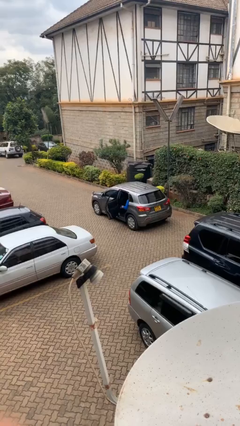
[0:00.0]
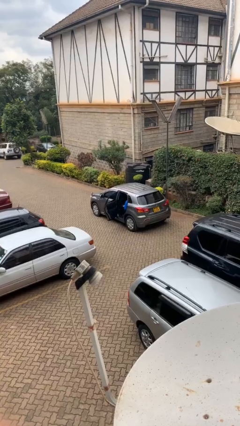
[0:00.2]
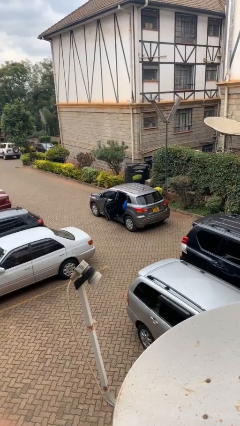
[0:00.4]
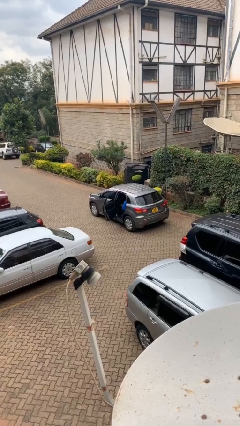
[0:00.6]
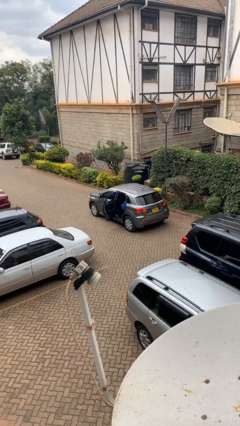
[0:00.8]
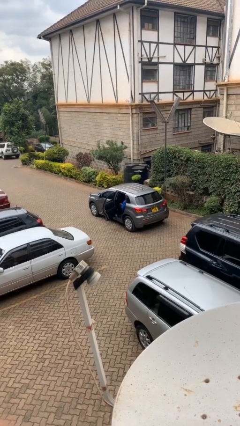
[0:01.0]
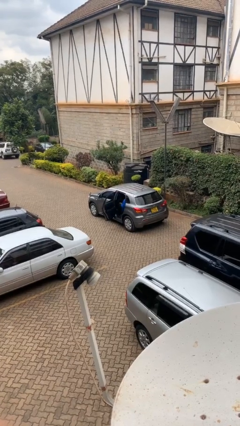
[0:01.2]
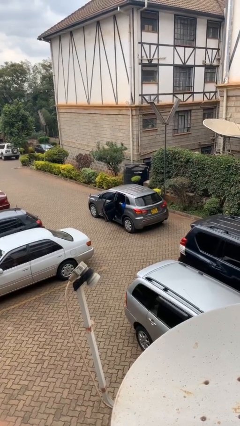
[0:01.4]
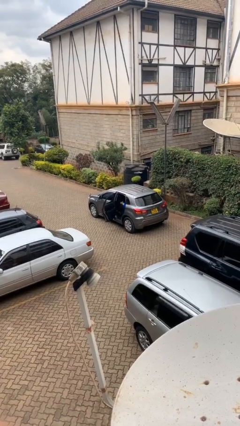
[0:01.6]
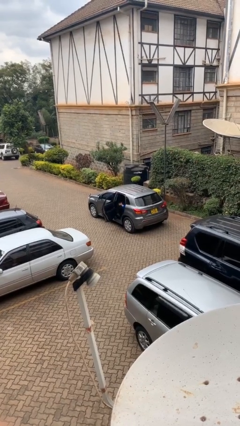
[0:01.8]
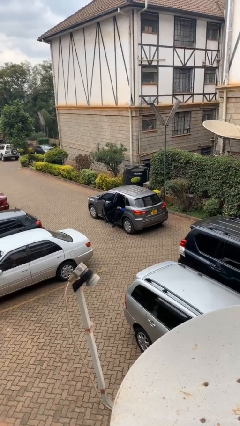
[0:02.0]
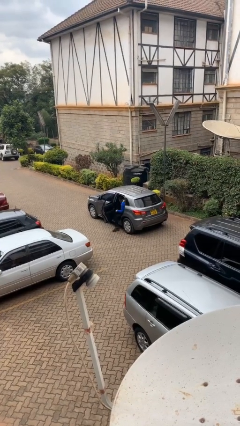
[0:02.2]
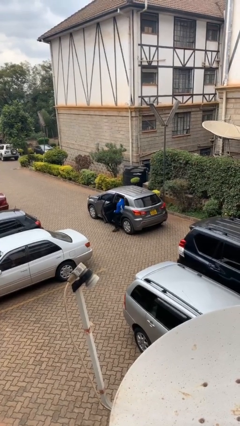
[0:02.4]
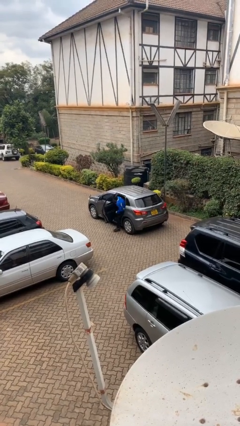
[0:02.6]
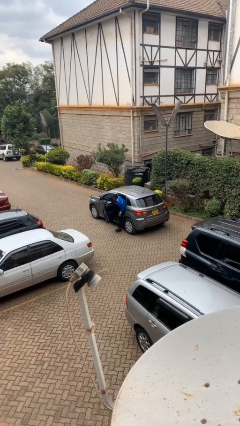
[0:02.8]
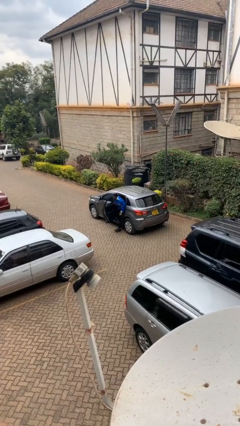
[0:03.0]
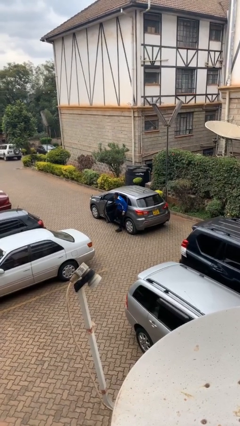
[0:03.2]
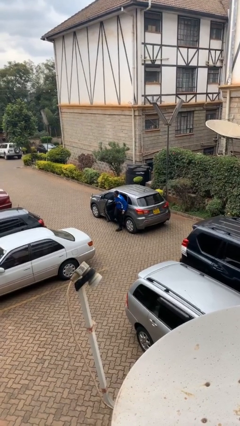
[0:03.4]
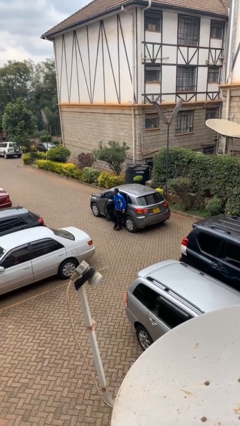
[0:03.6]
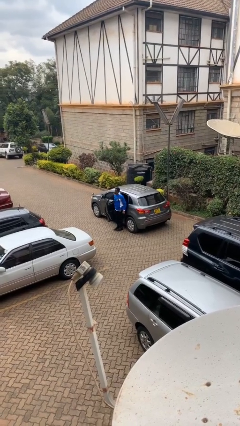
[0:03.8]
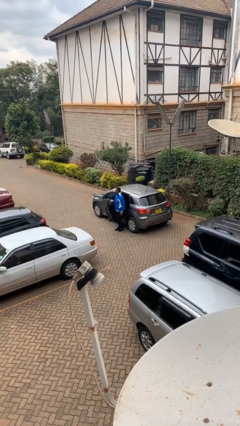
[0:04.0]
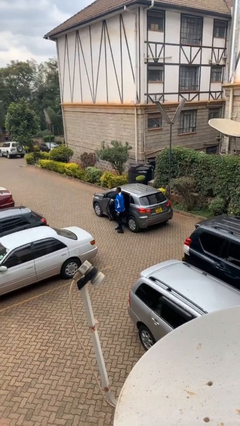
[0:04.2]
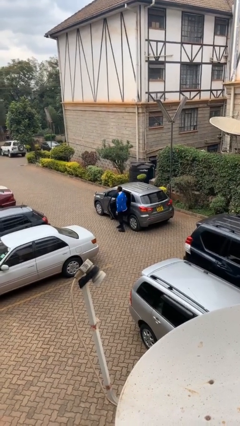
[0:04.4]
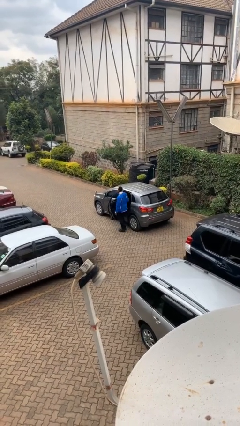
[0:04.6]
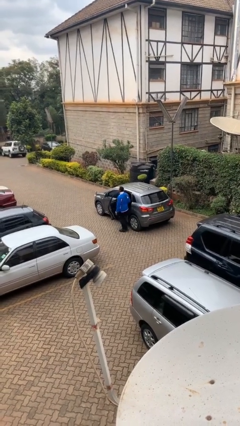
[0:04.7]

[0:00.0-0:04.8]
person exits car

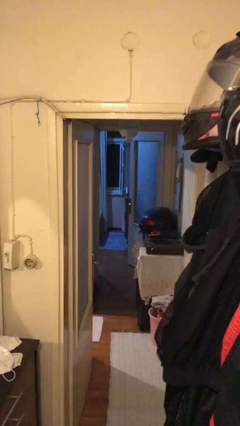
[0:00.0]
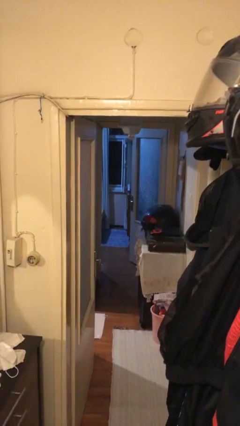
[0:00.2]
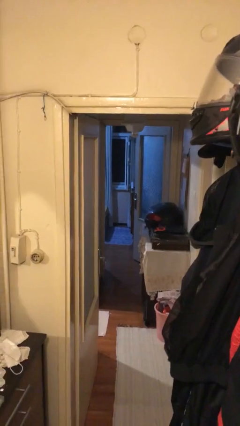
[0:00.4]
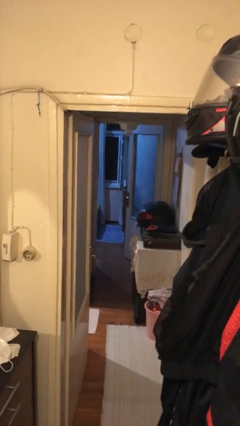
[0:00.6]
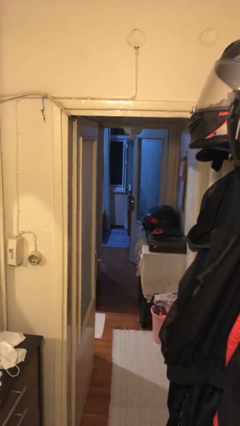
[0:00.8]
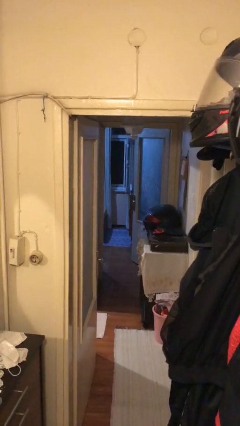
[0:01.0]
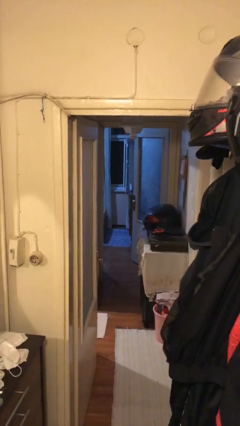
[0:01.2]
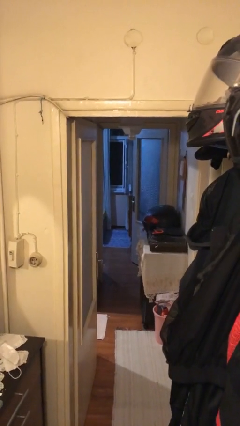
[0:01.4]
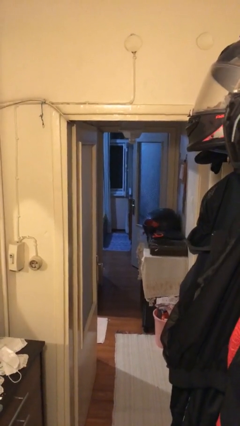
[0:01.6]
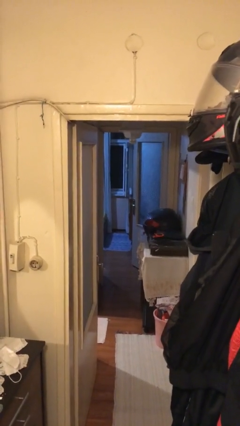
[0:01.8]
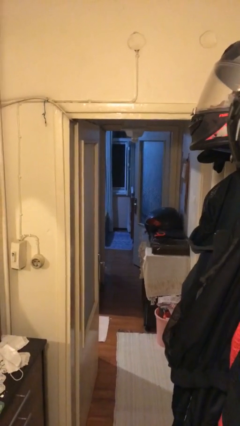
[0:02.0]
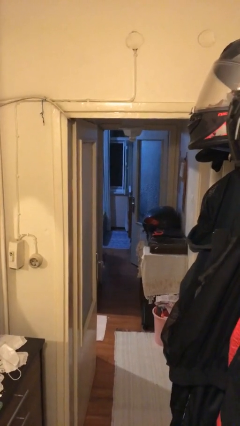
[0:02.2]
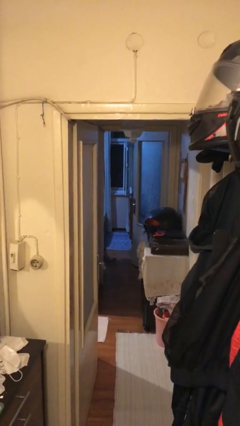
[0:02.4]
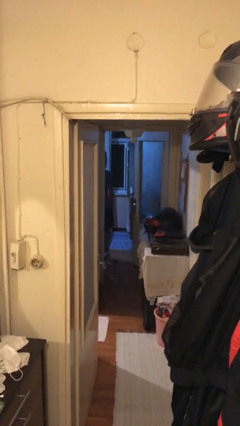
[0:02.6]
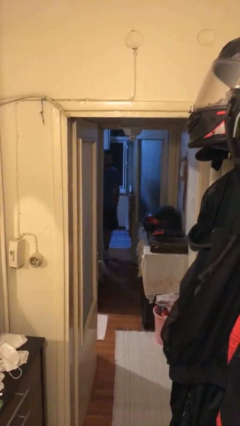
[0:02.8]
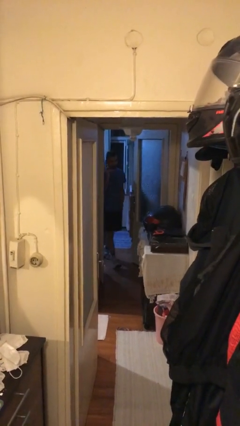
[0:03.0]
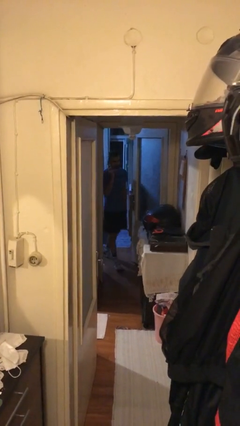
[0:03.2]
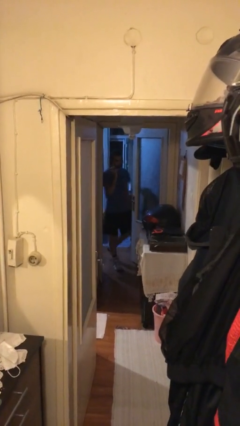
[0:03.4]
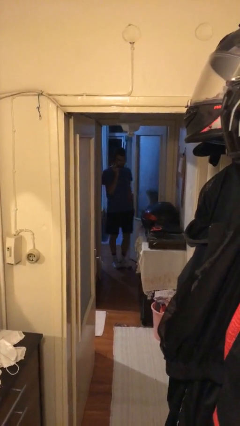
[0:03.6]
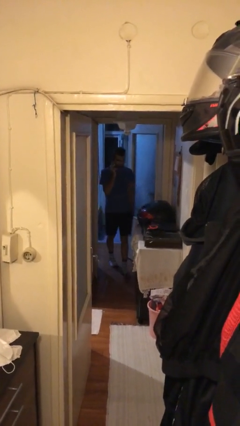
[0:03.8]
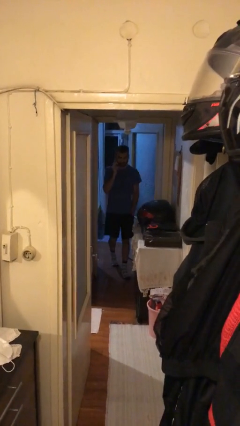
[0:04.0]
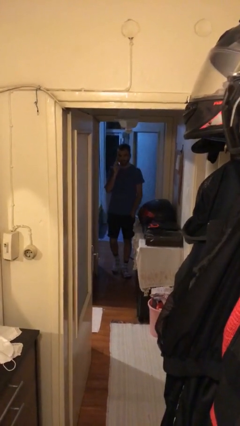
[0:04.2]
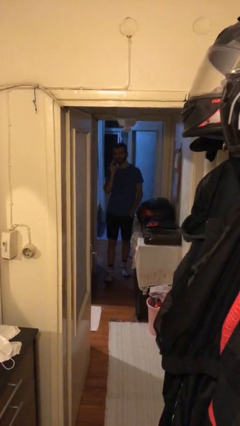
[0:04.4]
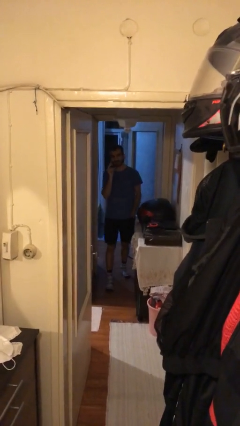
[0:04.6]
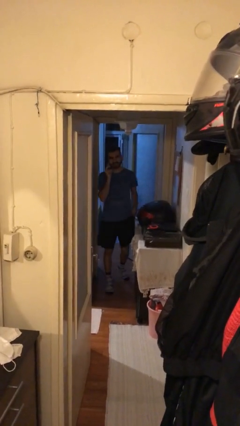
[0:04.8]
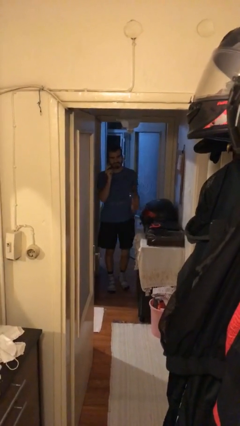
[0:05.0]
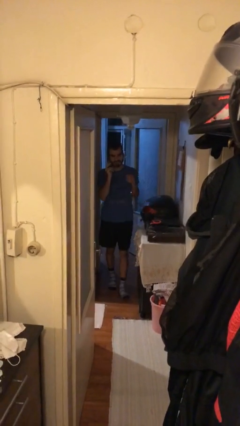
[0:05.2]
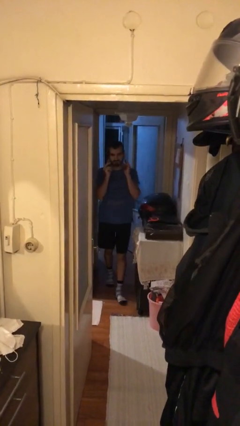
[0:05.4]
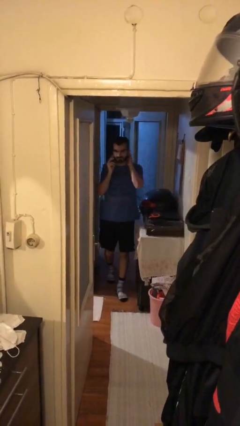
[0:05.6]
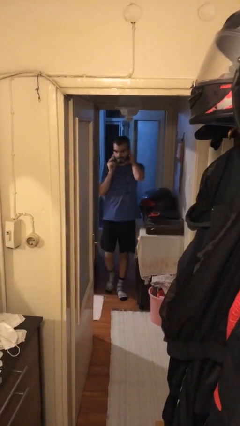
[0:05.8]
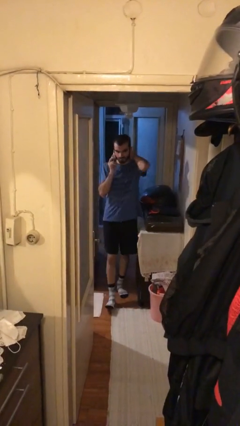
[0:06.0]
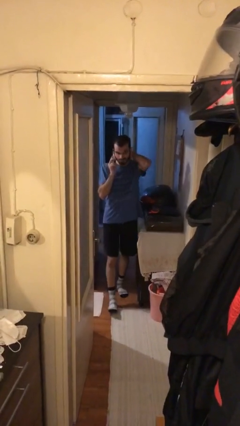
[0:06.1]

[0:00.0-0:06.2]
person enters scene through structure

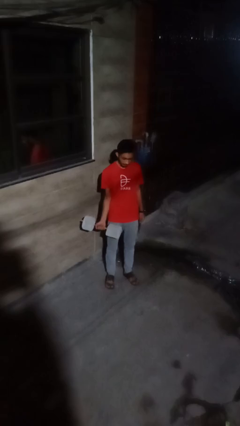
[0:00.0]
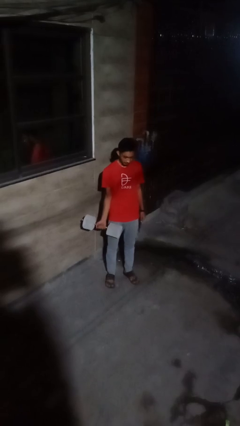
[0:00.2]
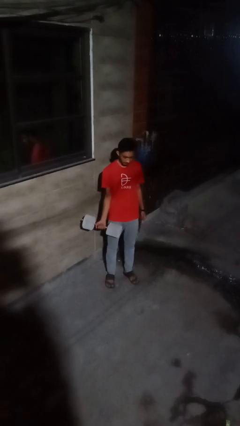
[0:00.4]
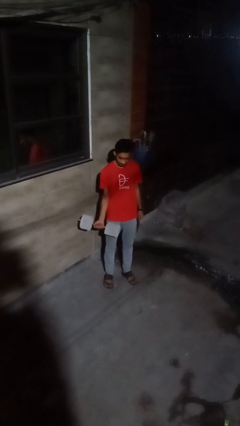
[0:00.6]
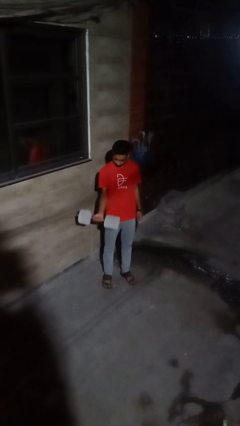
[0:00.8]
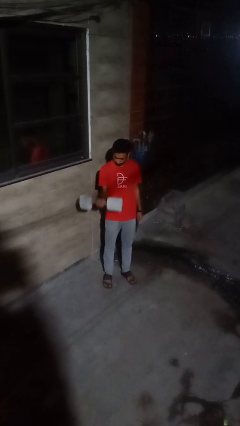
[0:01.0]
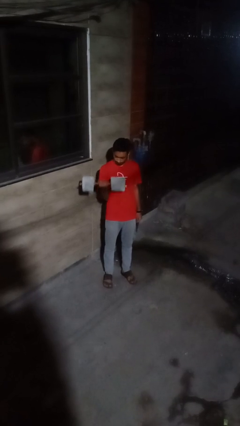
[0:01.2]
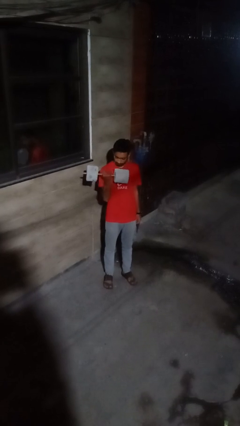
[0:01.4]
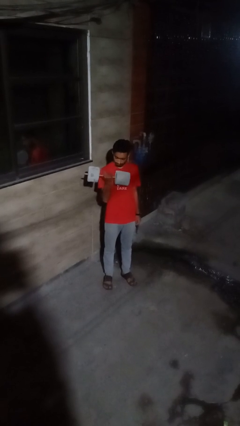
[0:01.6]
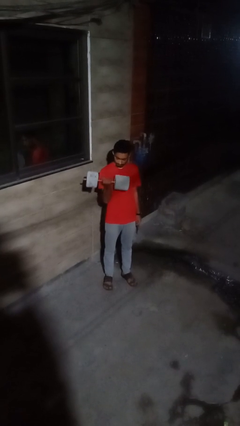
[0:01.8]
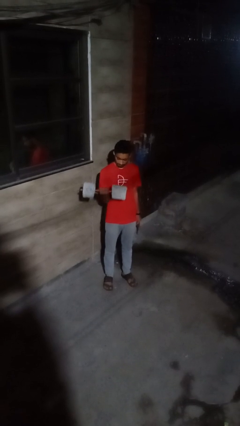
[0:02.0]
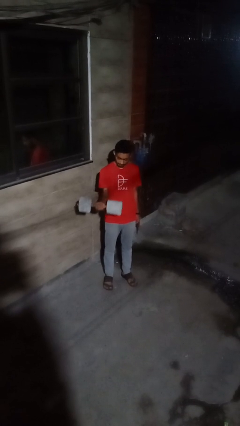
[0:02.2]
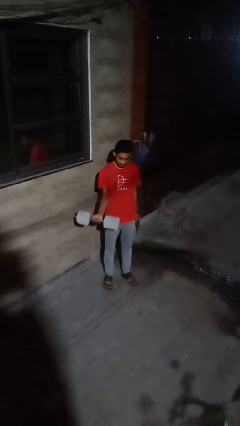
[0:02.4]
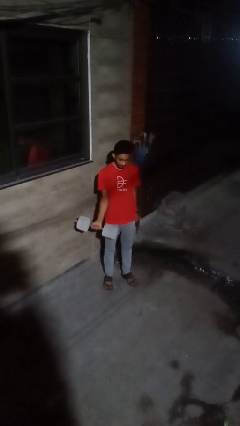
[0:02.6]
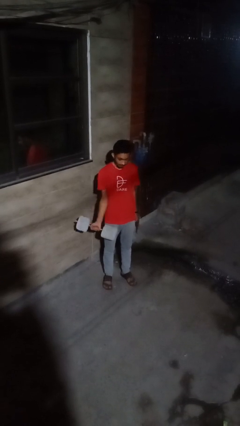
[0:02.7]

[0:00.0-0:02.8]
person lifts dumbbells

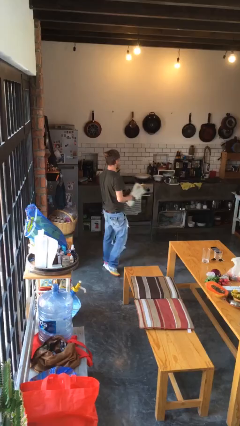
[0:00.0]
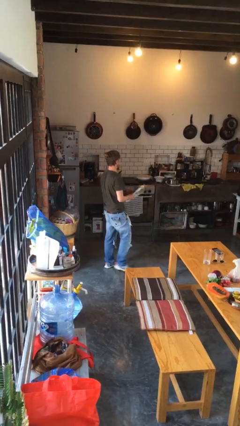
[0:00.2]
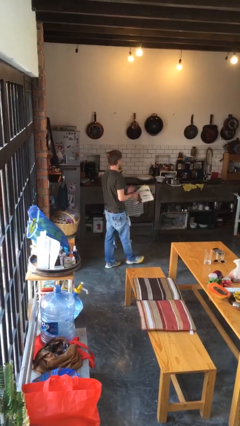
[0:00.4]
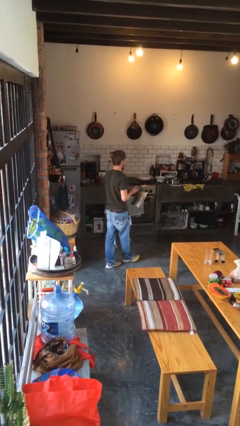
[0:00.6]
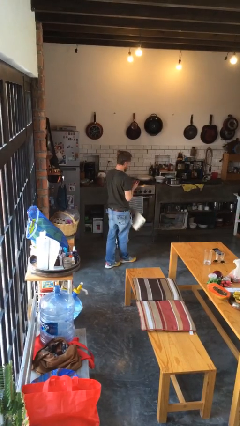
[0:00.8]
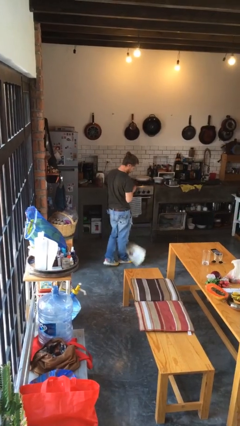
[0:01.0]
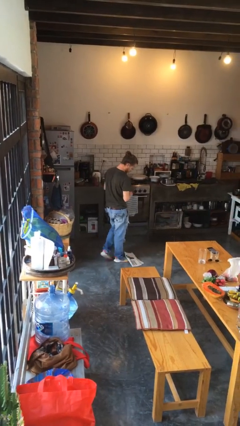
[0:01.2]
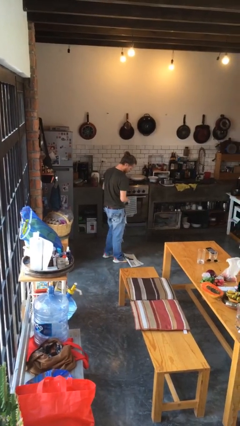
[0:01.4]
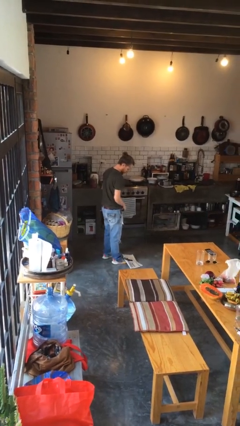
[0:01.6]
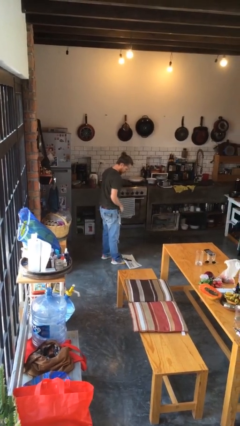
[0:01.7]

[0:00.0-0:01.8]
person drops object

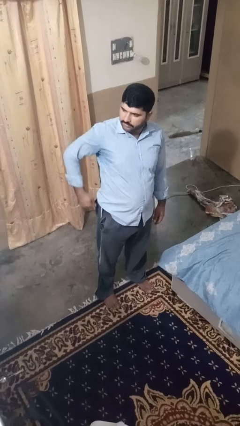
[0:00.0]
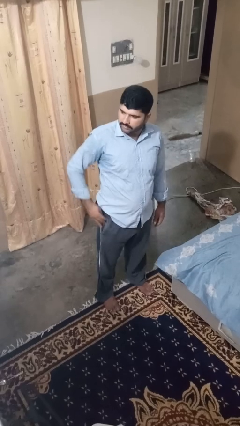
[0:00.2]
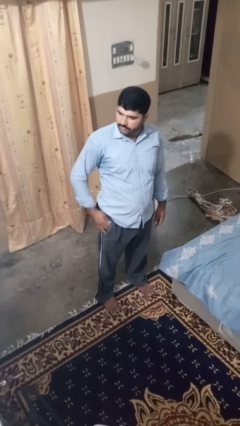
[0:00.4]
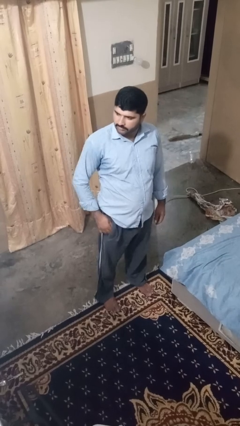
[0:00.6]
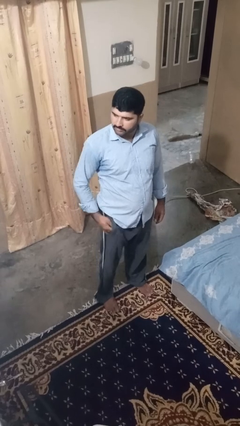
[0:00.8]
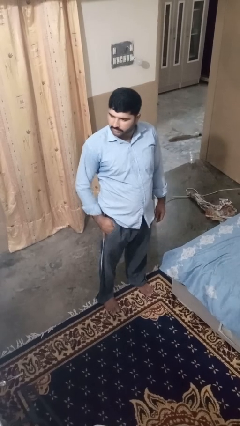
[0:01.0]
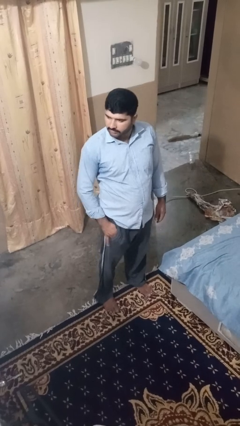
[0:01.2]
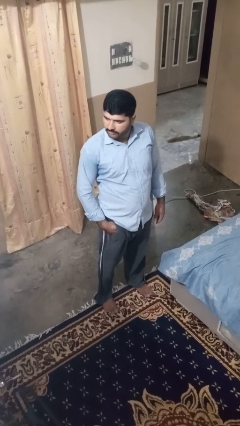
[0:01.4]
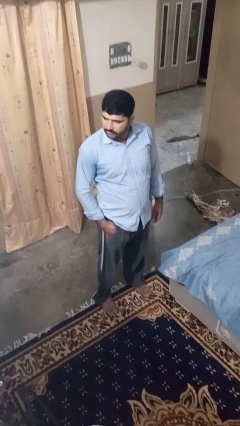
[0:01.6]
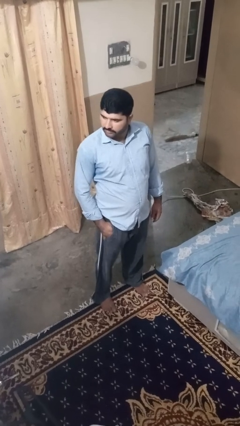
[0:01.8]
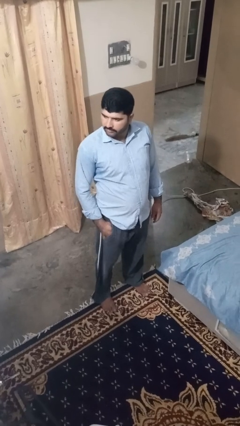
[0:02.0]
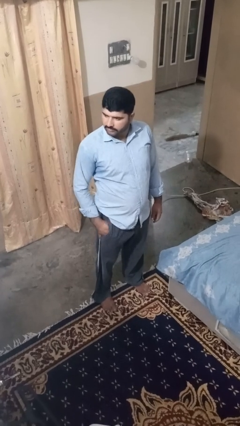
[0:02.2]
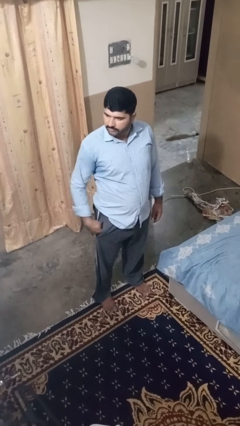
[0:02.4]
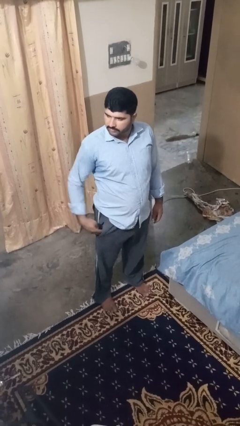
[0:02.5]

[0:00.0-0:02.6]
person puts hands in back pockets
